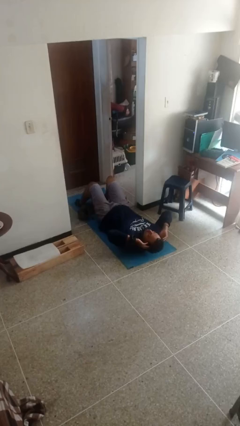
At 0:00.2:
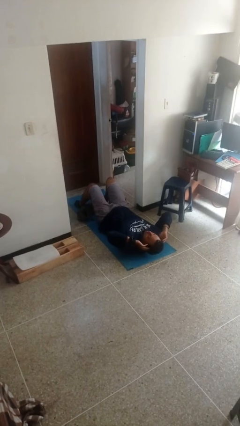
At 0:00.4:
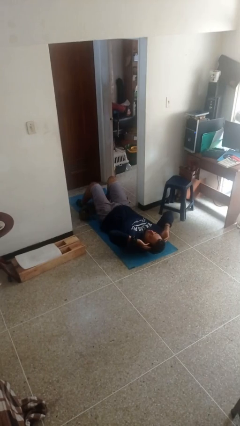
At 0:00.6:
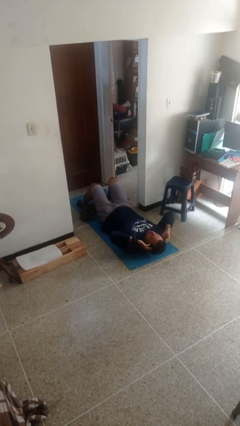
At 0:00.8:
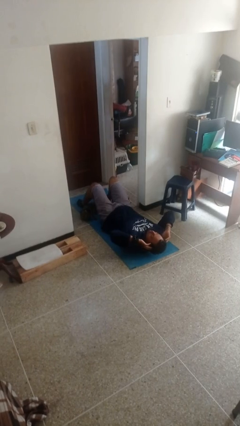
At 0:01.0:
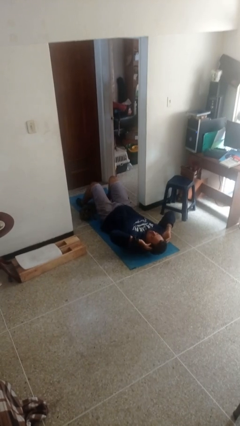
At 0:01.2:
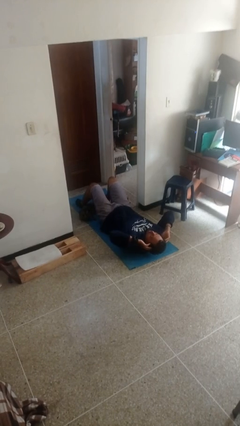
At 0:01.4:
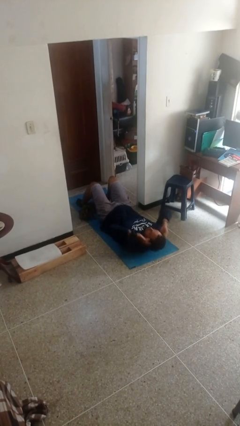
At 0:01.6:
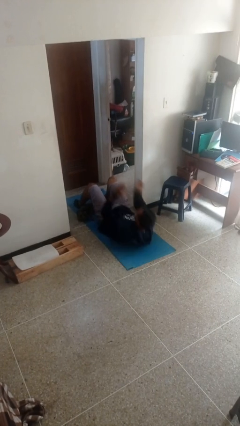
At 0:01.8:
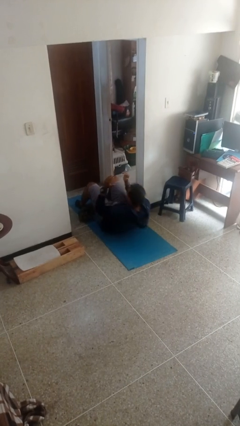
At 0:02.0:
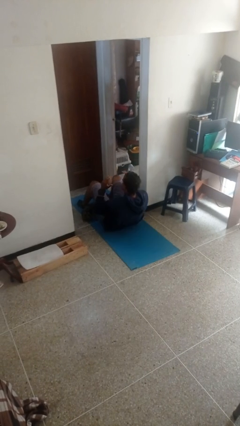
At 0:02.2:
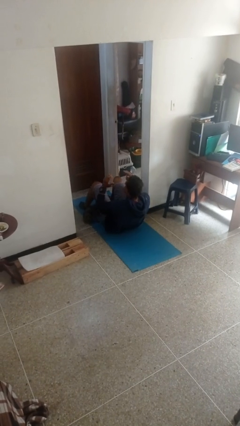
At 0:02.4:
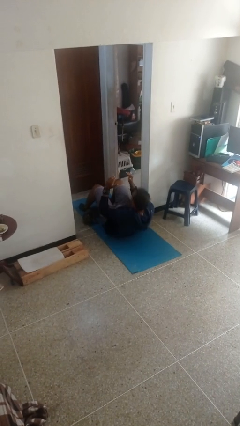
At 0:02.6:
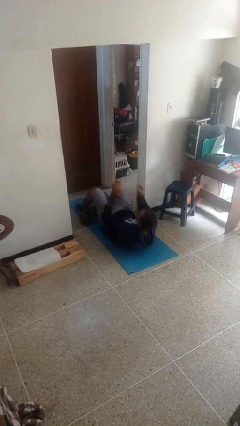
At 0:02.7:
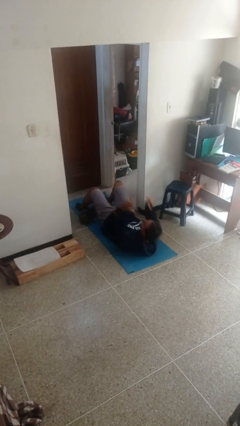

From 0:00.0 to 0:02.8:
person exercises with situp

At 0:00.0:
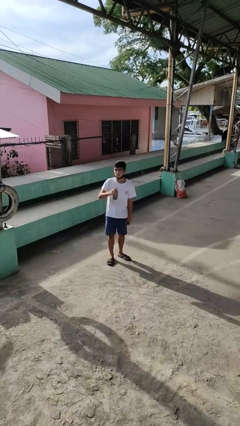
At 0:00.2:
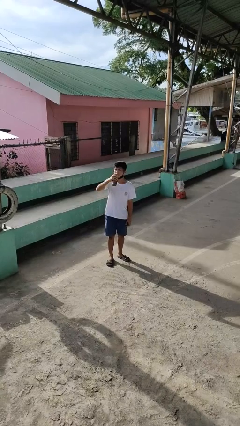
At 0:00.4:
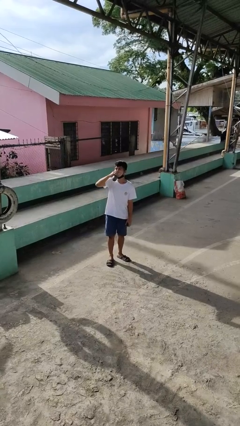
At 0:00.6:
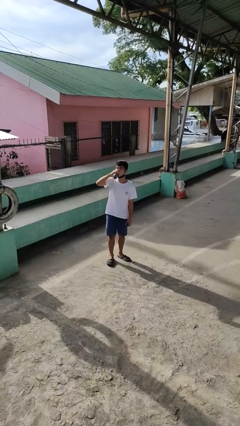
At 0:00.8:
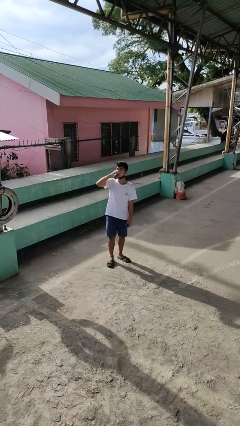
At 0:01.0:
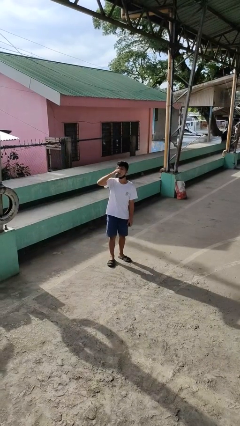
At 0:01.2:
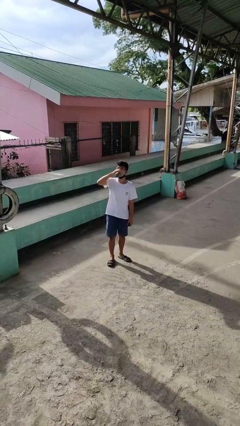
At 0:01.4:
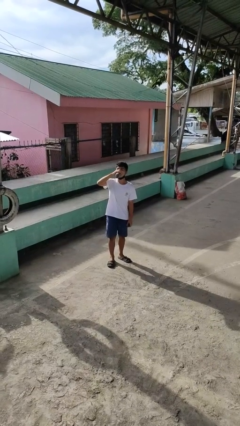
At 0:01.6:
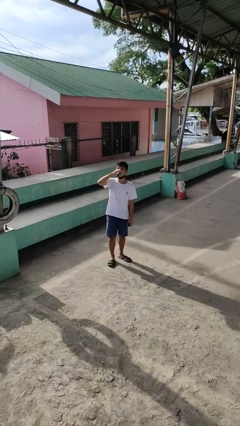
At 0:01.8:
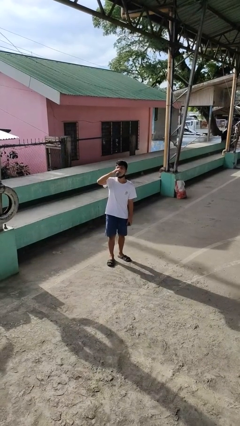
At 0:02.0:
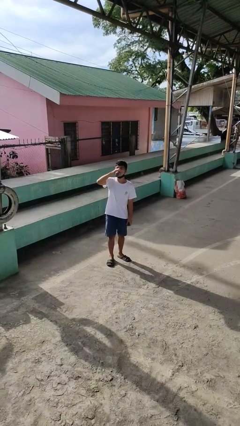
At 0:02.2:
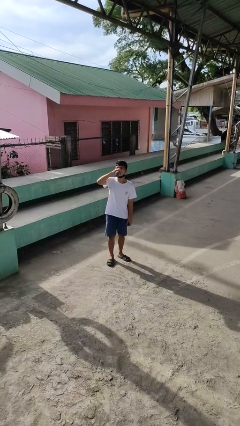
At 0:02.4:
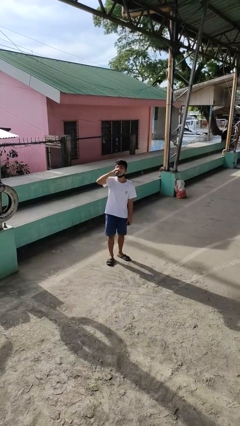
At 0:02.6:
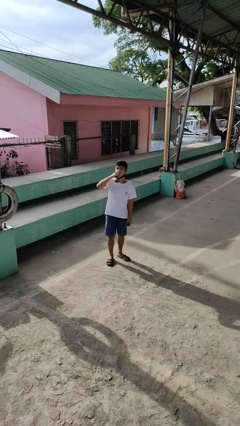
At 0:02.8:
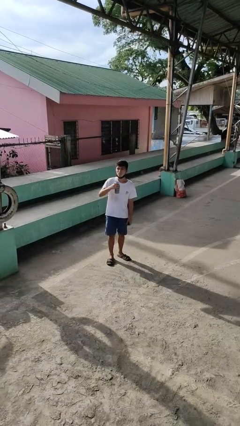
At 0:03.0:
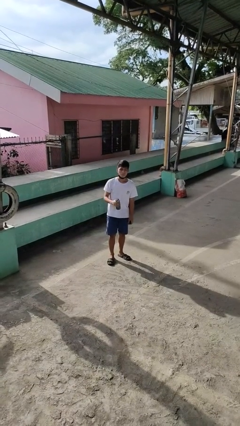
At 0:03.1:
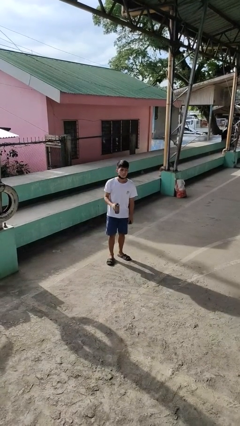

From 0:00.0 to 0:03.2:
person drinks from bottle

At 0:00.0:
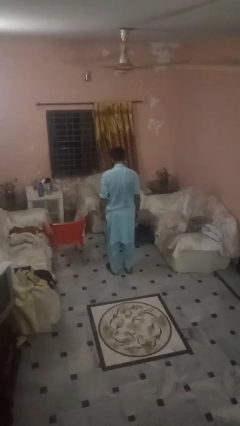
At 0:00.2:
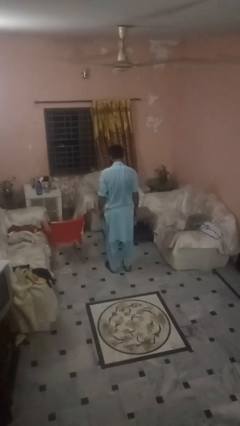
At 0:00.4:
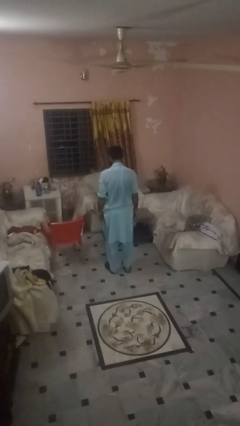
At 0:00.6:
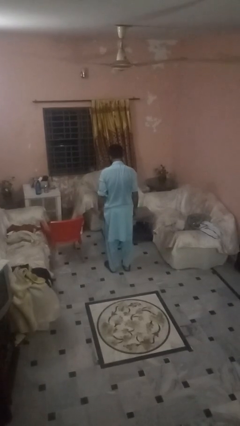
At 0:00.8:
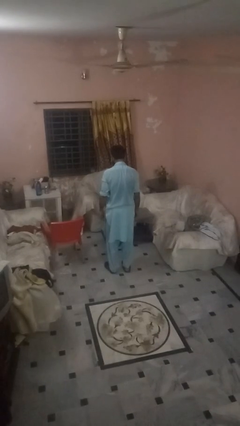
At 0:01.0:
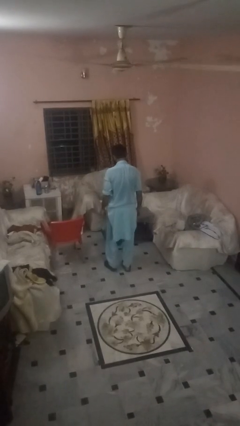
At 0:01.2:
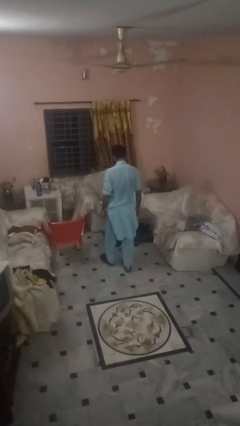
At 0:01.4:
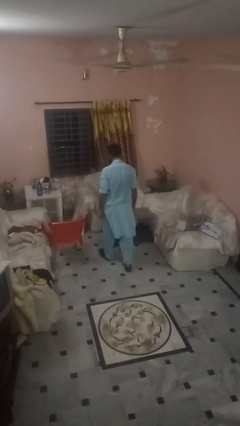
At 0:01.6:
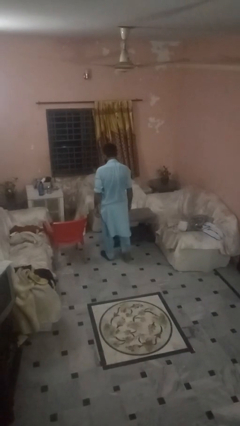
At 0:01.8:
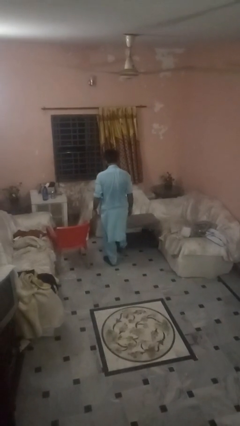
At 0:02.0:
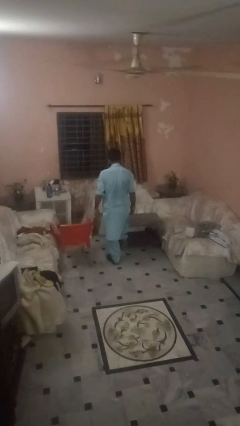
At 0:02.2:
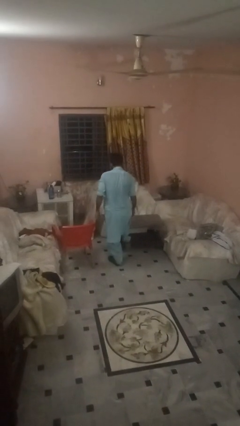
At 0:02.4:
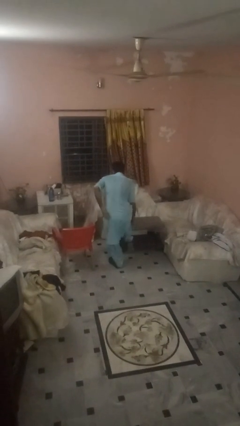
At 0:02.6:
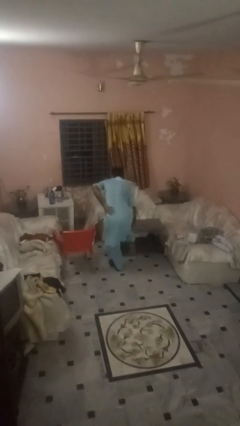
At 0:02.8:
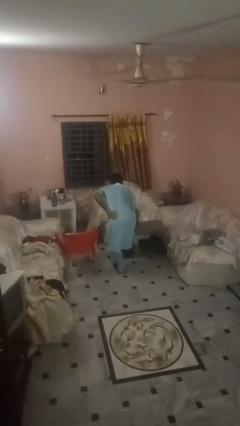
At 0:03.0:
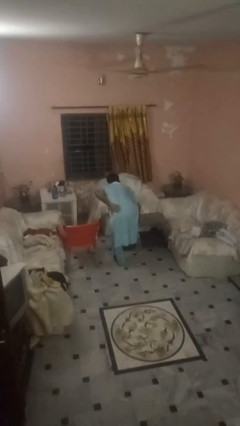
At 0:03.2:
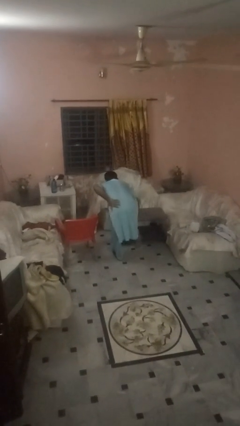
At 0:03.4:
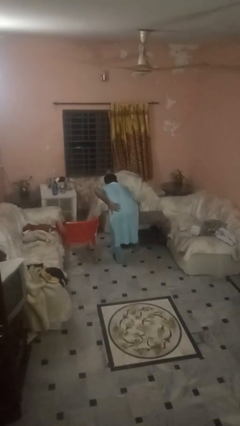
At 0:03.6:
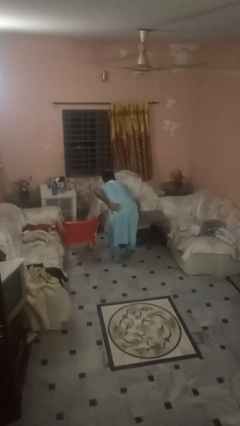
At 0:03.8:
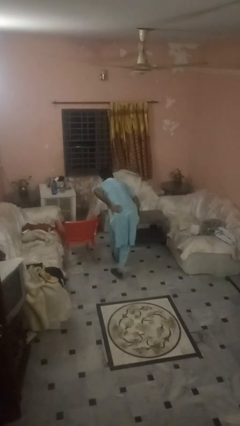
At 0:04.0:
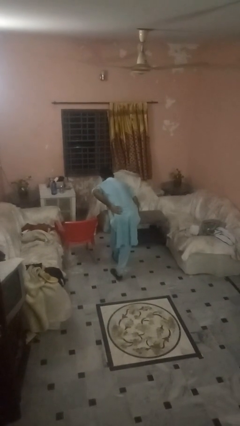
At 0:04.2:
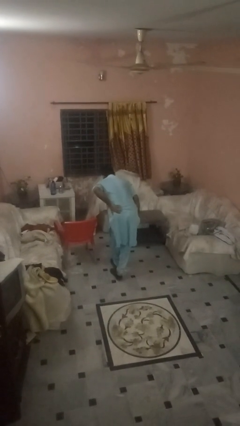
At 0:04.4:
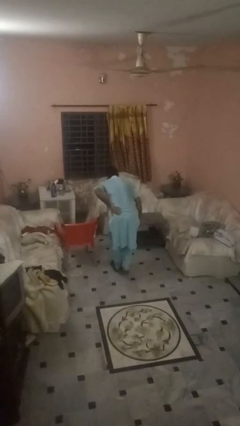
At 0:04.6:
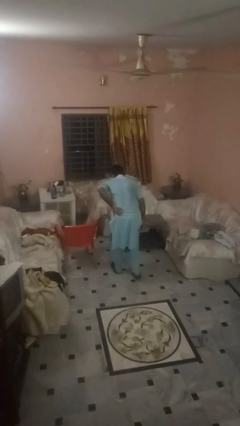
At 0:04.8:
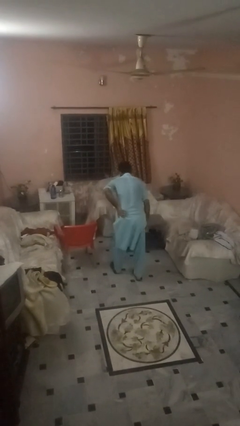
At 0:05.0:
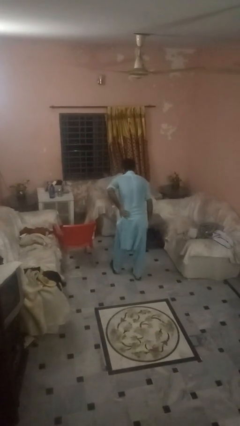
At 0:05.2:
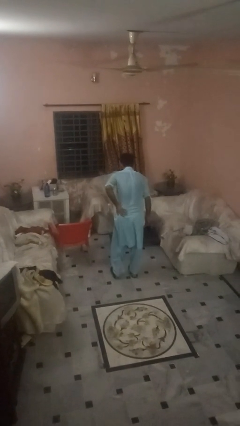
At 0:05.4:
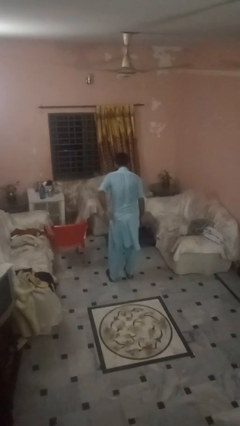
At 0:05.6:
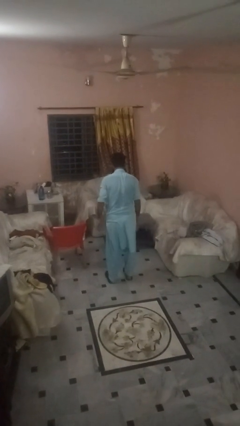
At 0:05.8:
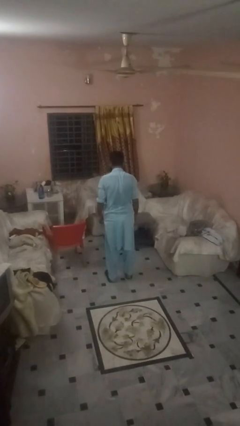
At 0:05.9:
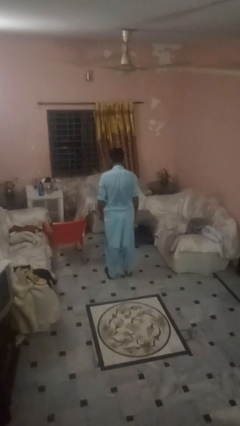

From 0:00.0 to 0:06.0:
person bumps into table

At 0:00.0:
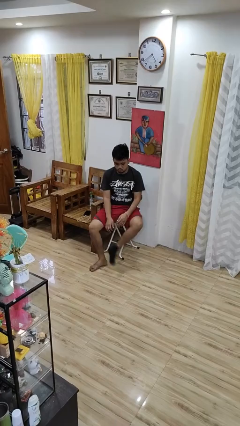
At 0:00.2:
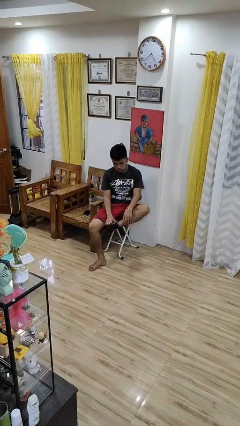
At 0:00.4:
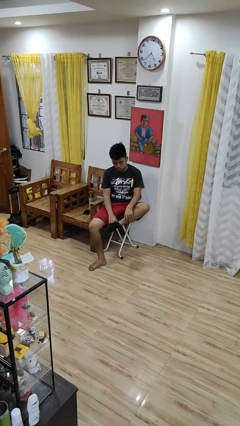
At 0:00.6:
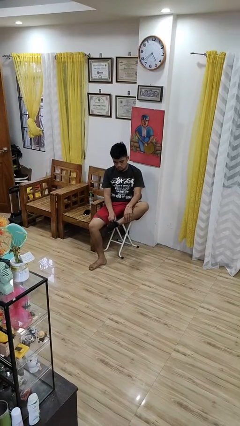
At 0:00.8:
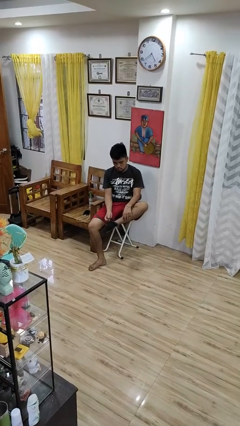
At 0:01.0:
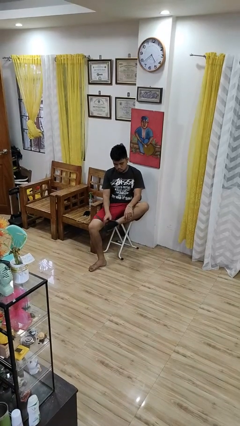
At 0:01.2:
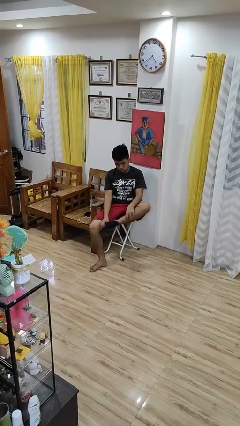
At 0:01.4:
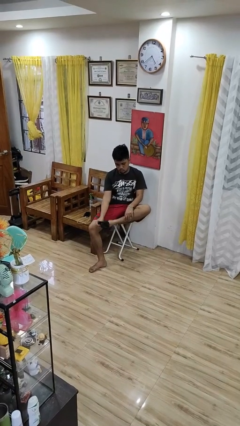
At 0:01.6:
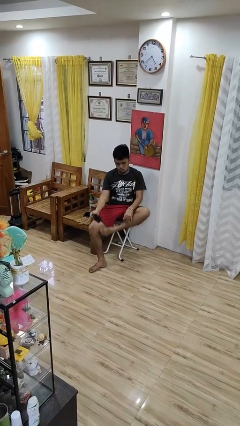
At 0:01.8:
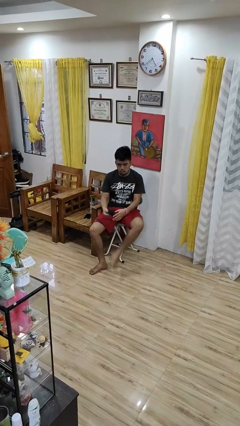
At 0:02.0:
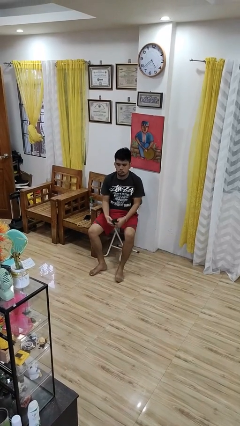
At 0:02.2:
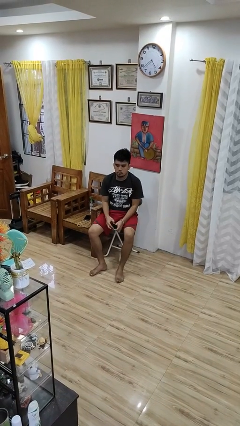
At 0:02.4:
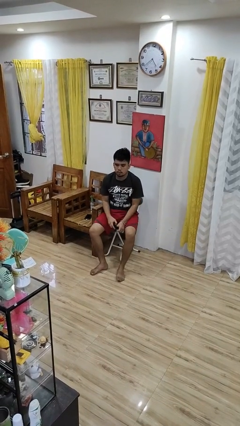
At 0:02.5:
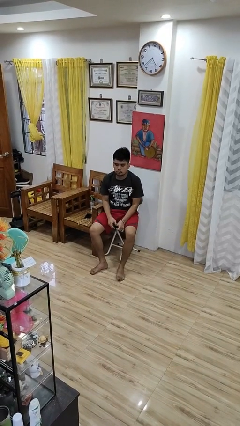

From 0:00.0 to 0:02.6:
person takes off socks

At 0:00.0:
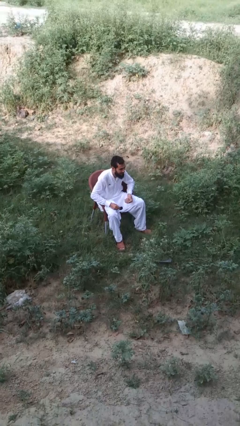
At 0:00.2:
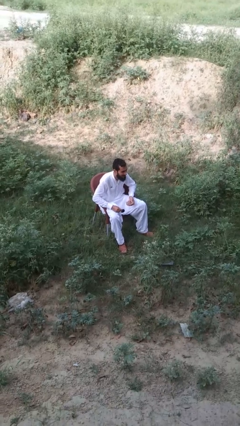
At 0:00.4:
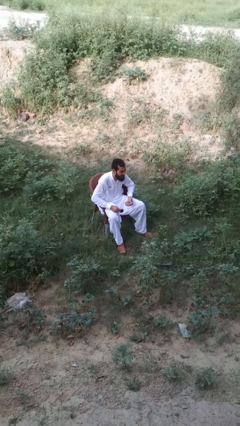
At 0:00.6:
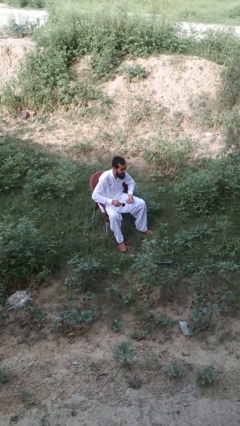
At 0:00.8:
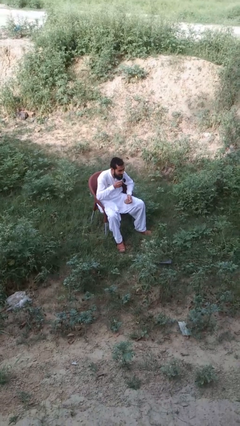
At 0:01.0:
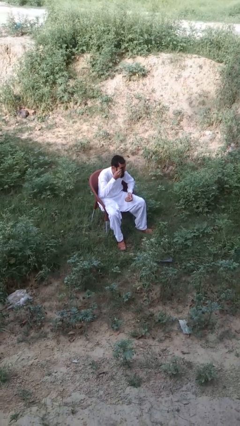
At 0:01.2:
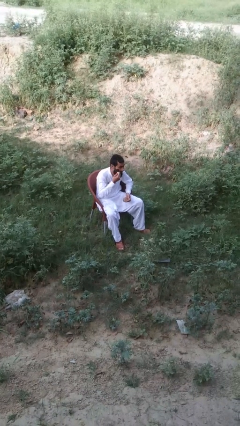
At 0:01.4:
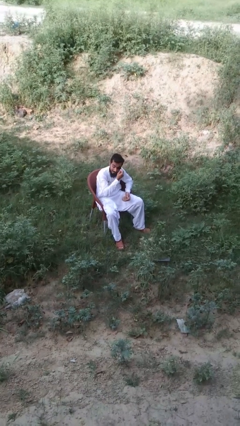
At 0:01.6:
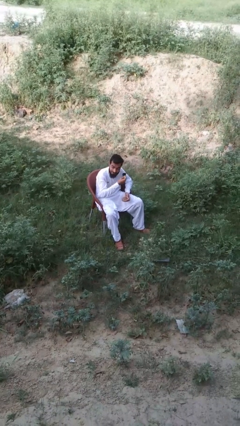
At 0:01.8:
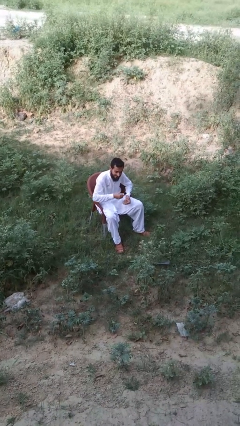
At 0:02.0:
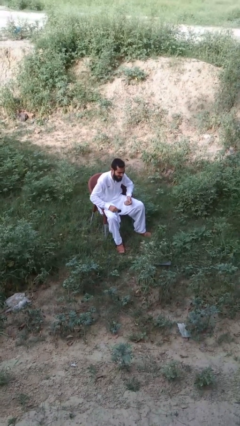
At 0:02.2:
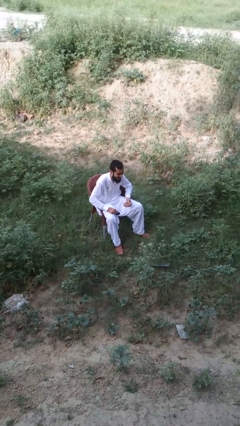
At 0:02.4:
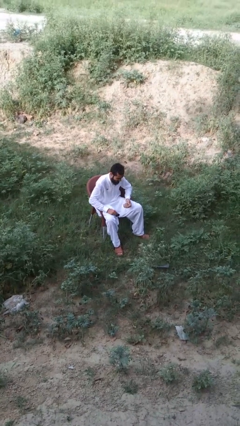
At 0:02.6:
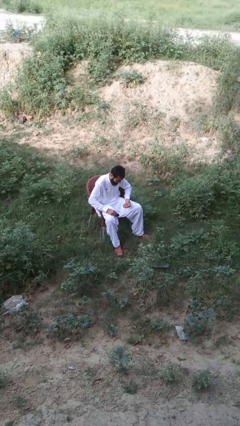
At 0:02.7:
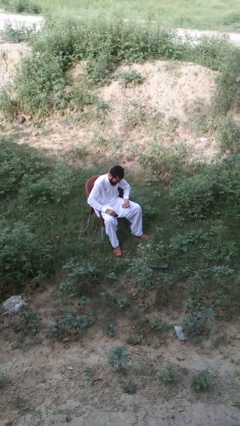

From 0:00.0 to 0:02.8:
person shades eyes

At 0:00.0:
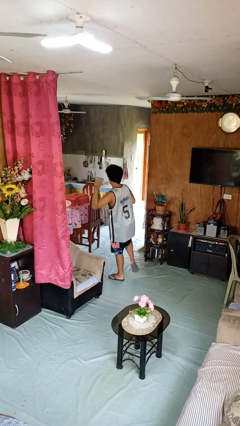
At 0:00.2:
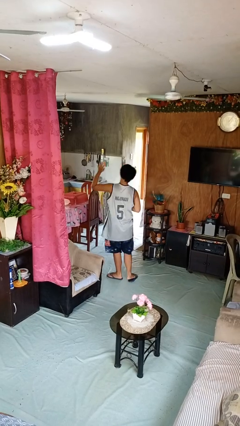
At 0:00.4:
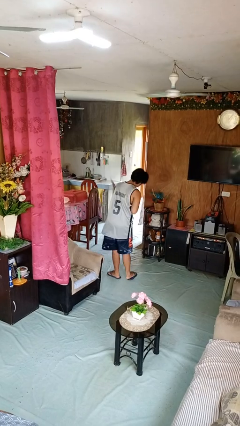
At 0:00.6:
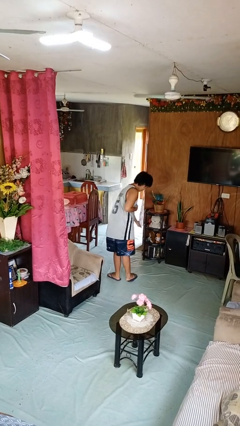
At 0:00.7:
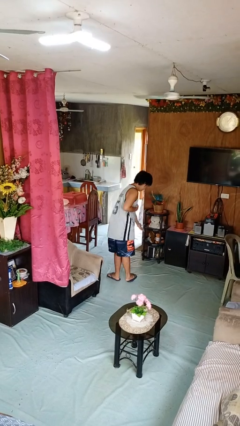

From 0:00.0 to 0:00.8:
person karate chop
